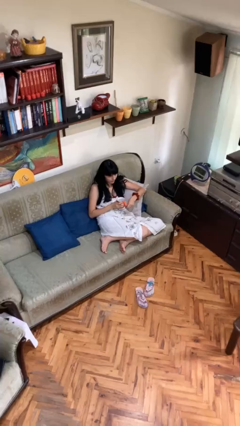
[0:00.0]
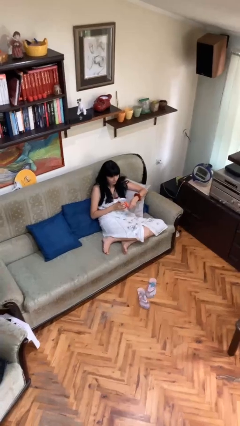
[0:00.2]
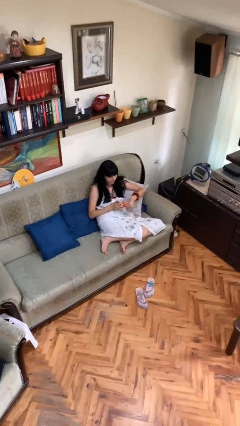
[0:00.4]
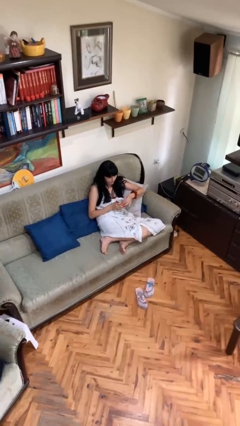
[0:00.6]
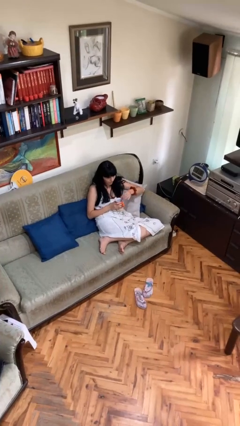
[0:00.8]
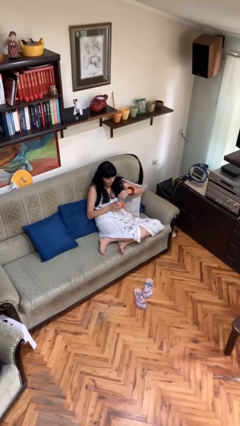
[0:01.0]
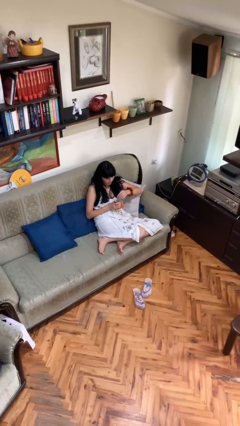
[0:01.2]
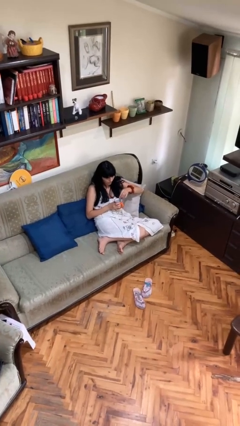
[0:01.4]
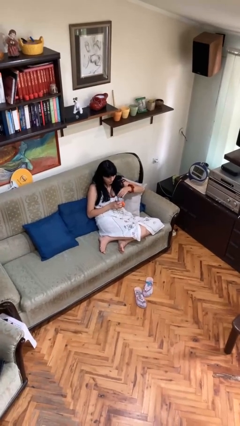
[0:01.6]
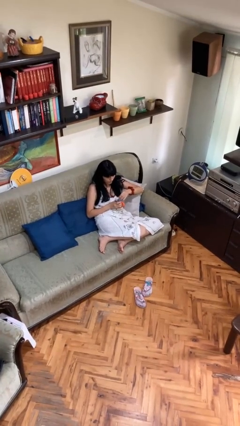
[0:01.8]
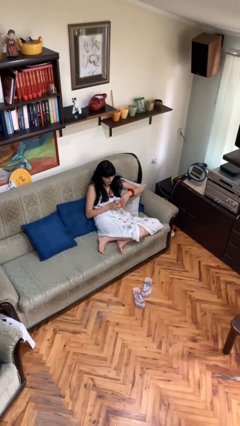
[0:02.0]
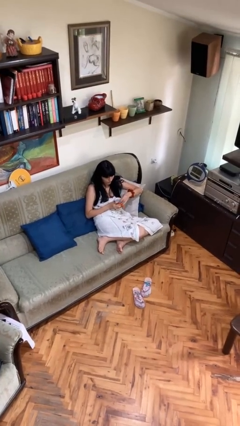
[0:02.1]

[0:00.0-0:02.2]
person stirs mug

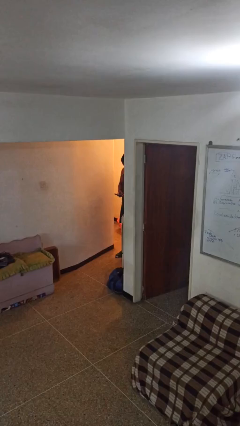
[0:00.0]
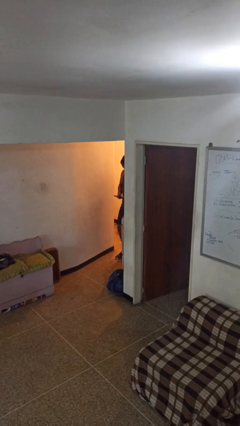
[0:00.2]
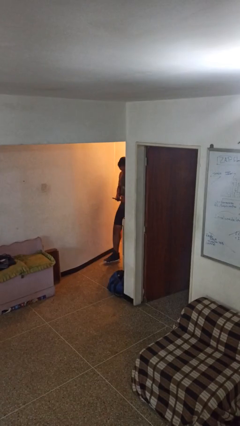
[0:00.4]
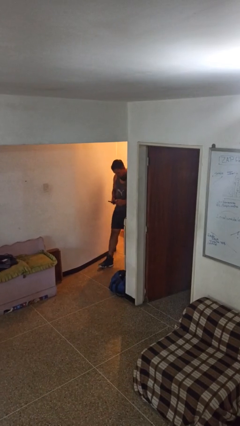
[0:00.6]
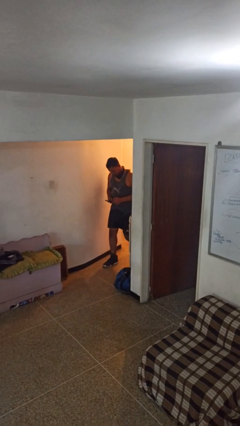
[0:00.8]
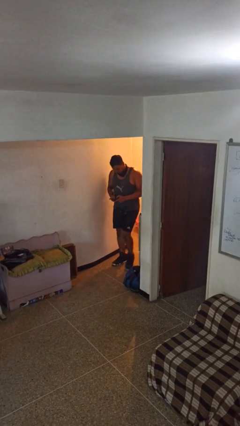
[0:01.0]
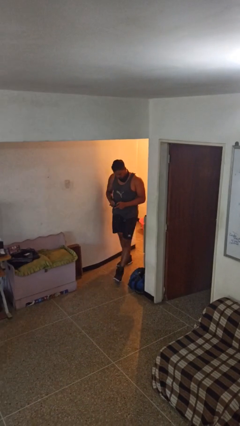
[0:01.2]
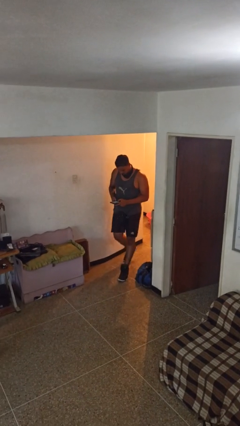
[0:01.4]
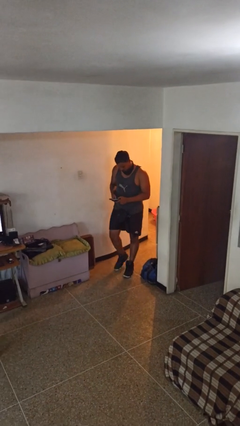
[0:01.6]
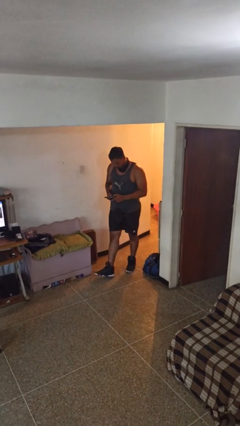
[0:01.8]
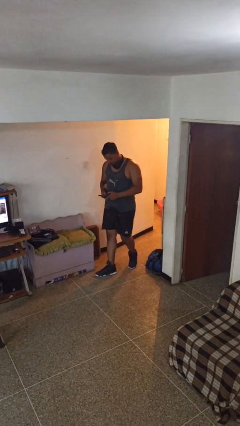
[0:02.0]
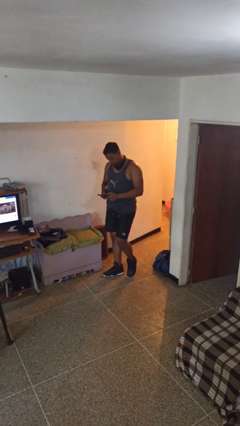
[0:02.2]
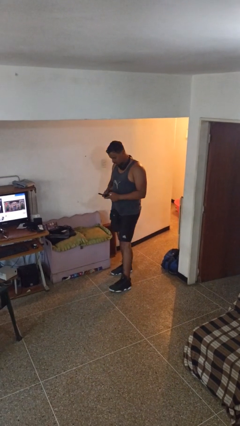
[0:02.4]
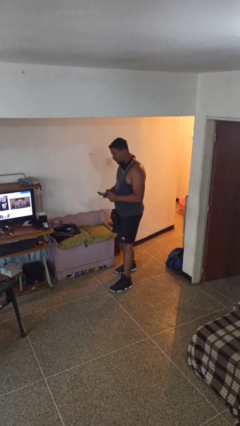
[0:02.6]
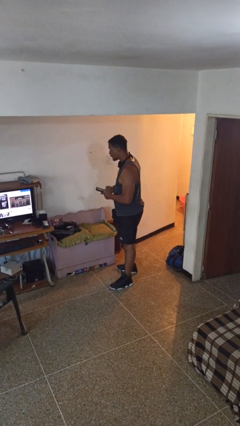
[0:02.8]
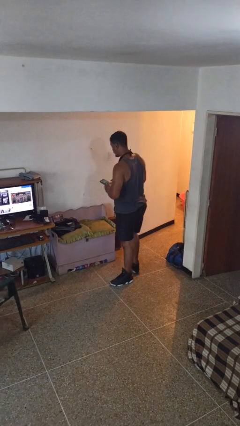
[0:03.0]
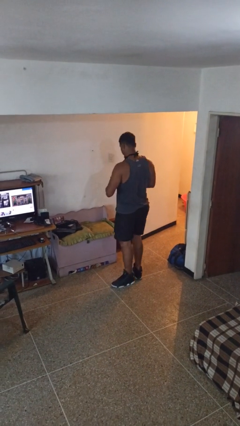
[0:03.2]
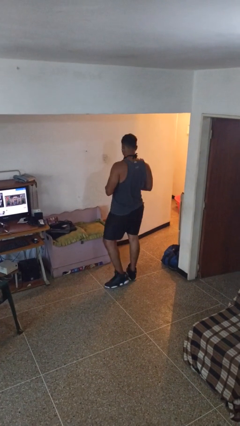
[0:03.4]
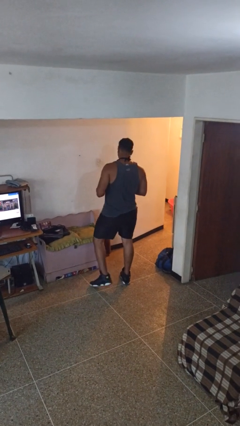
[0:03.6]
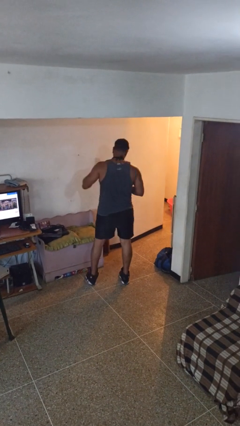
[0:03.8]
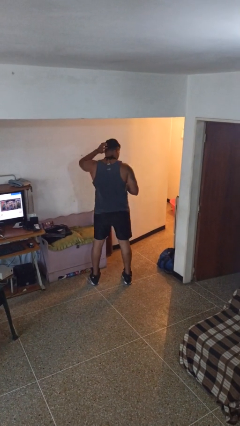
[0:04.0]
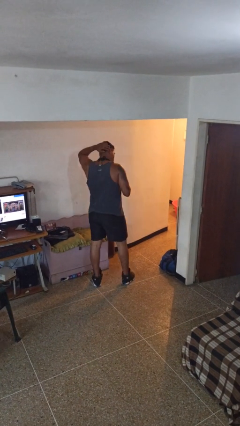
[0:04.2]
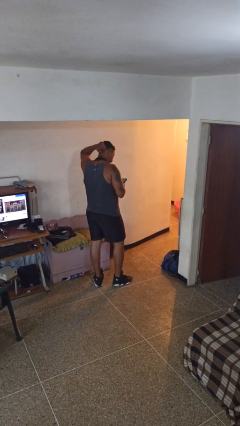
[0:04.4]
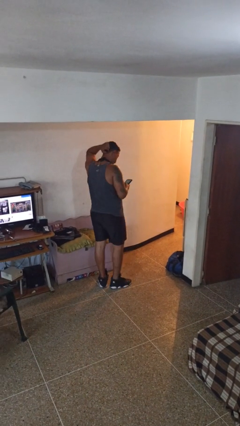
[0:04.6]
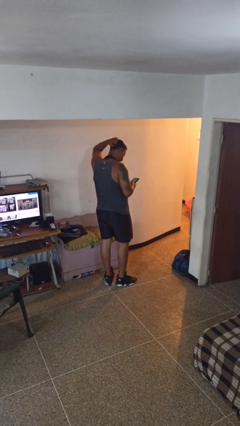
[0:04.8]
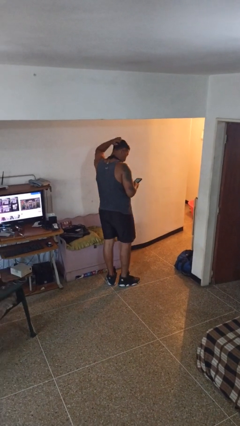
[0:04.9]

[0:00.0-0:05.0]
person enters scene through structure

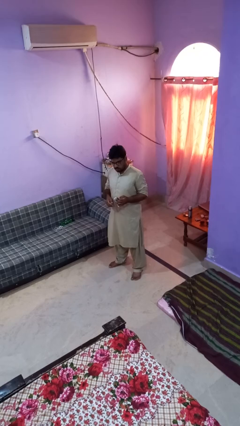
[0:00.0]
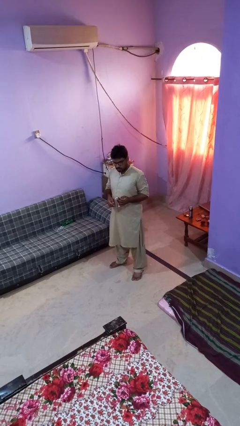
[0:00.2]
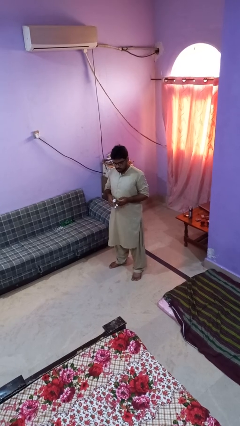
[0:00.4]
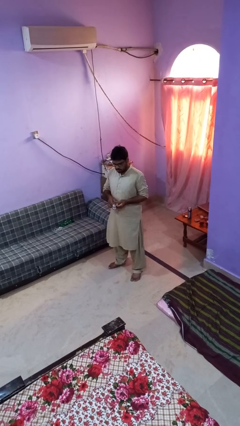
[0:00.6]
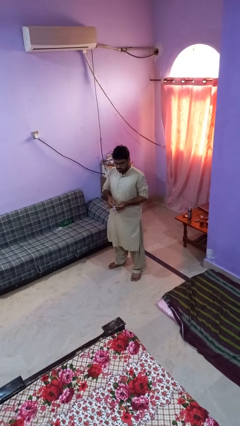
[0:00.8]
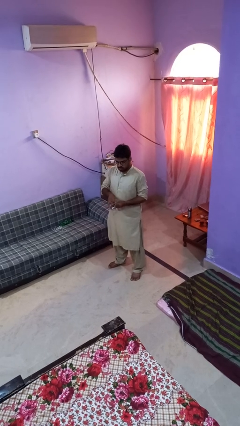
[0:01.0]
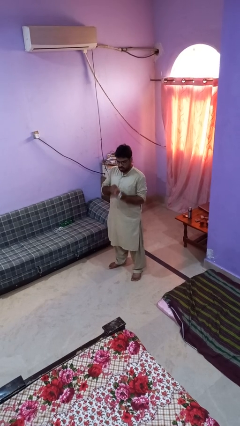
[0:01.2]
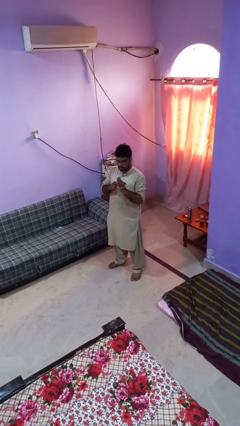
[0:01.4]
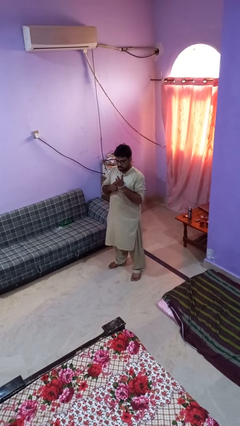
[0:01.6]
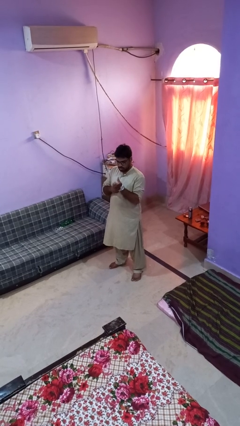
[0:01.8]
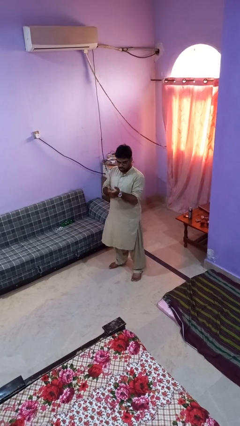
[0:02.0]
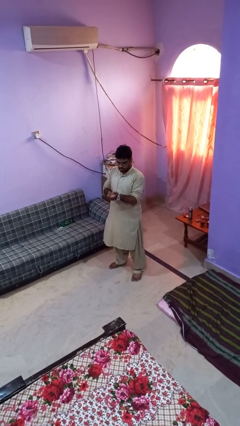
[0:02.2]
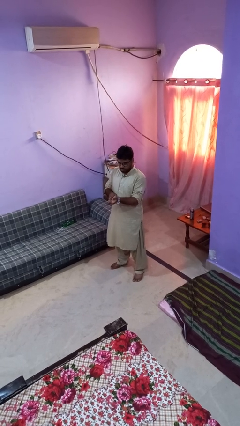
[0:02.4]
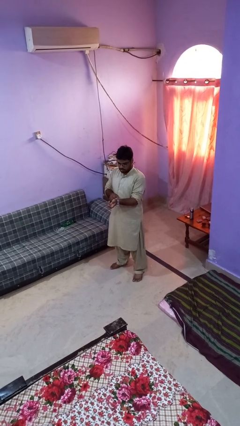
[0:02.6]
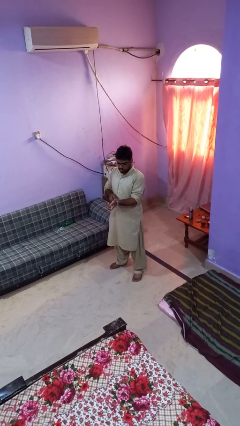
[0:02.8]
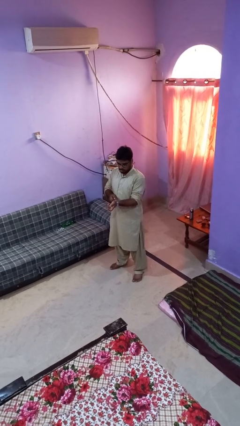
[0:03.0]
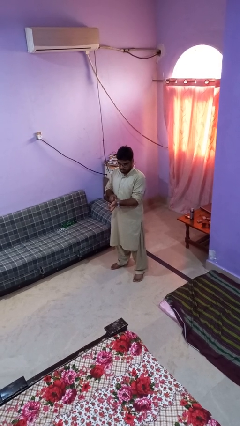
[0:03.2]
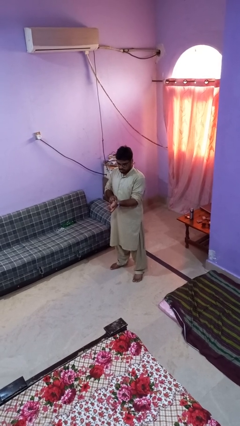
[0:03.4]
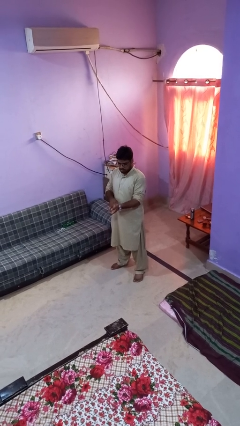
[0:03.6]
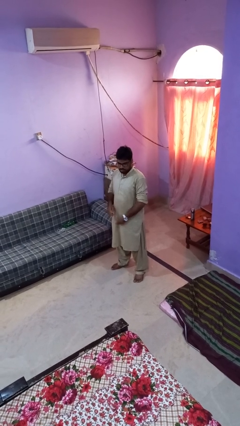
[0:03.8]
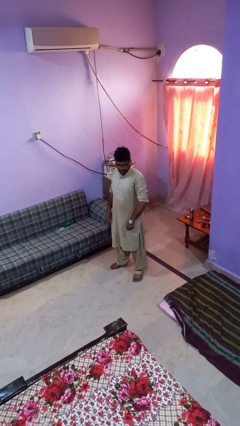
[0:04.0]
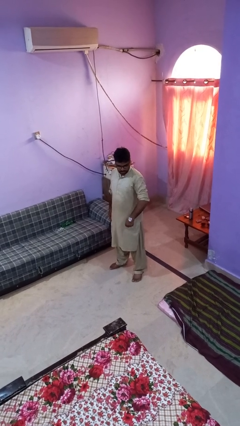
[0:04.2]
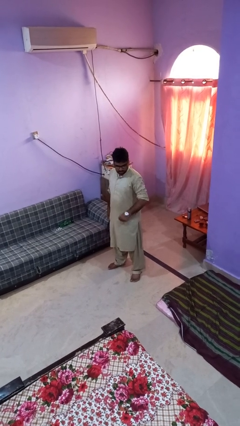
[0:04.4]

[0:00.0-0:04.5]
person puts on wristwatch

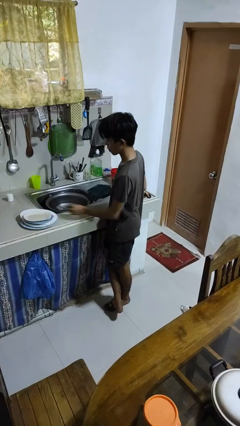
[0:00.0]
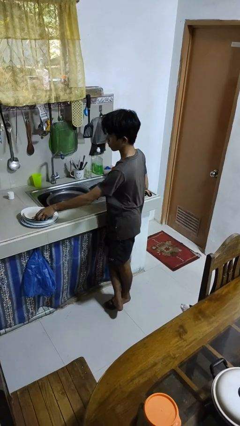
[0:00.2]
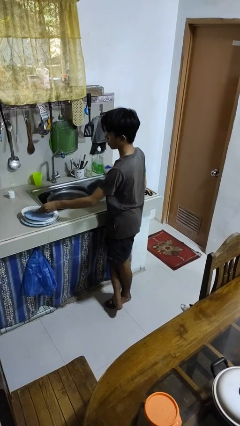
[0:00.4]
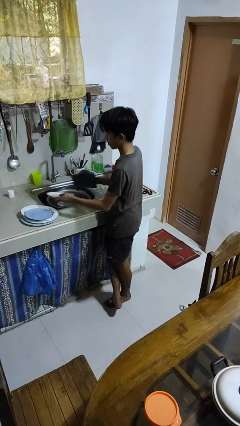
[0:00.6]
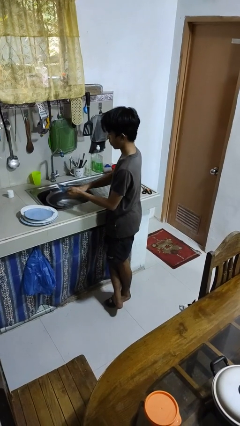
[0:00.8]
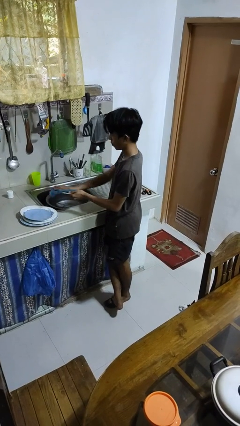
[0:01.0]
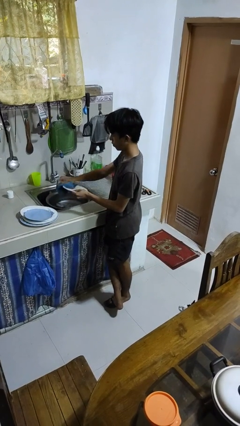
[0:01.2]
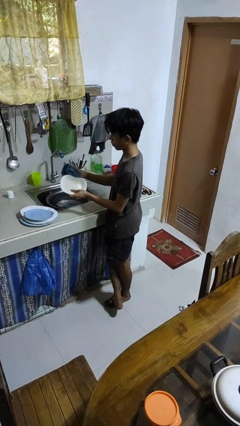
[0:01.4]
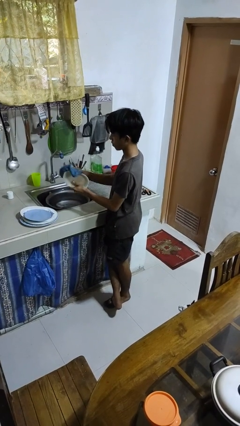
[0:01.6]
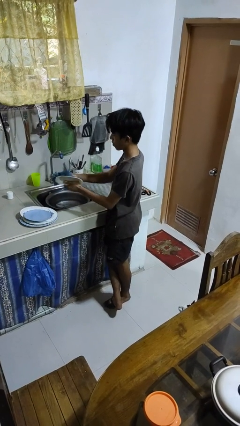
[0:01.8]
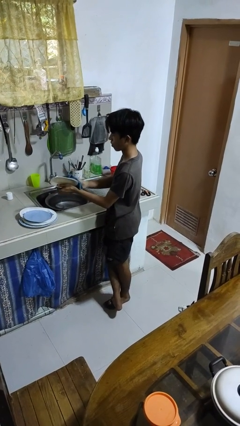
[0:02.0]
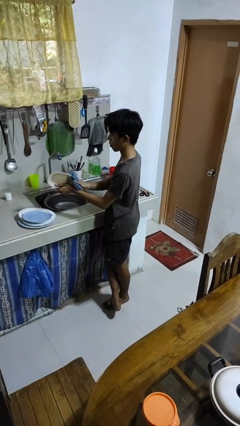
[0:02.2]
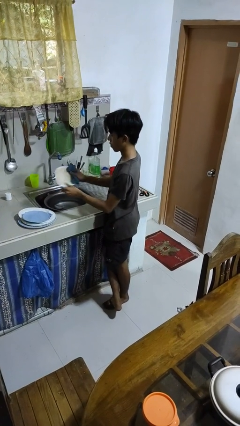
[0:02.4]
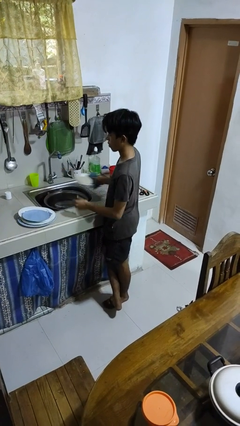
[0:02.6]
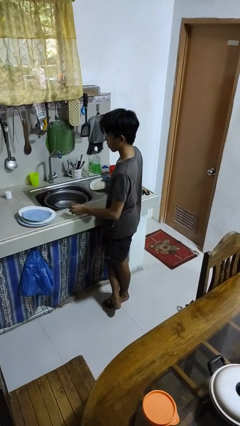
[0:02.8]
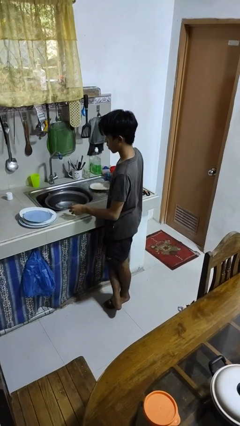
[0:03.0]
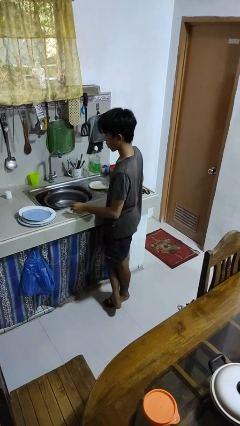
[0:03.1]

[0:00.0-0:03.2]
person dries dish

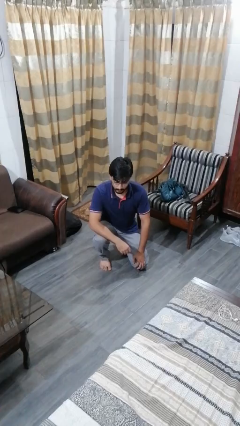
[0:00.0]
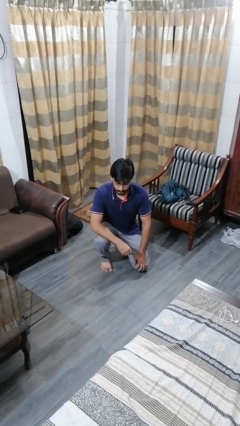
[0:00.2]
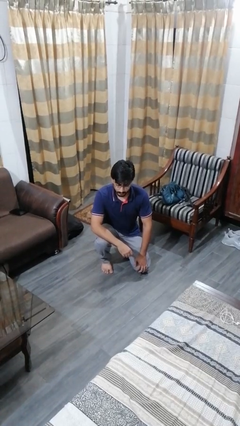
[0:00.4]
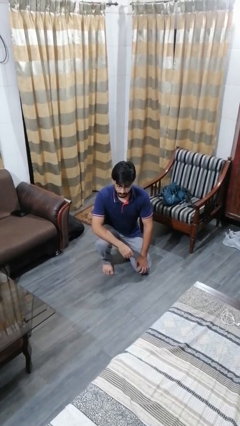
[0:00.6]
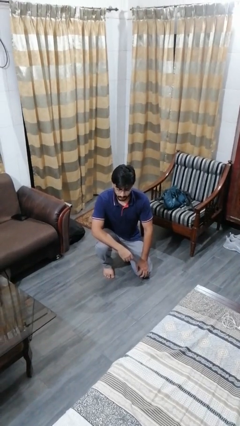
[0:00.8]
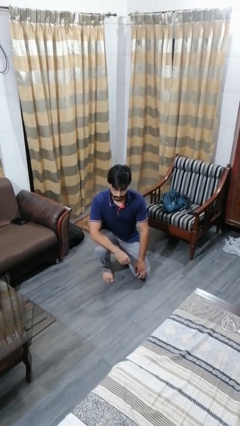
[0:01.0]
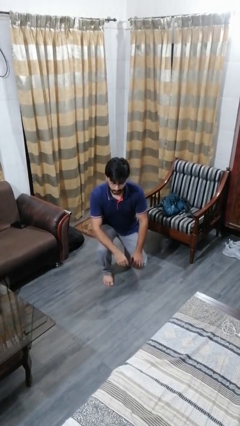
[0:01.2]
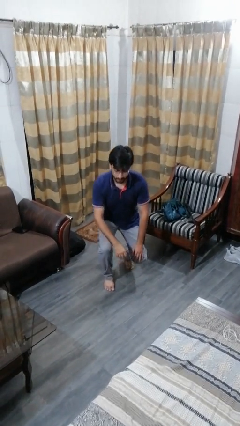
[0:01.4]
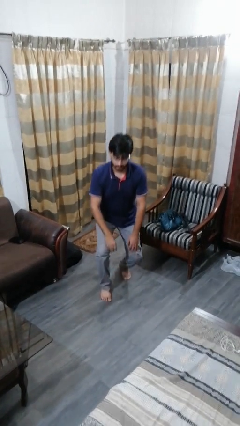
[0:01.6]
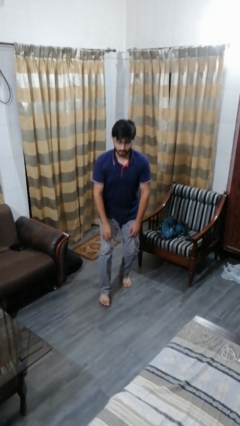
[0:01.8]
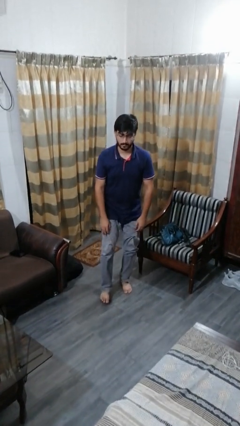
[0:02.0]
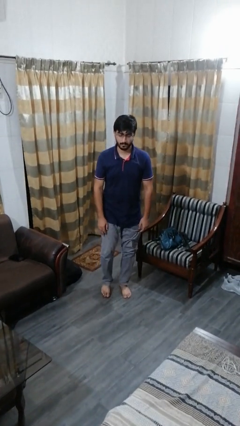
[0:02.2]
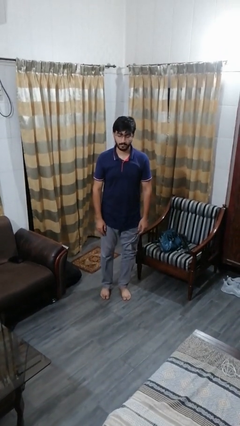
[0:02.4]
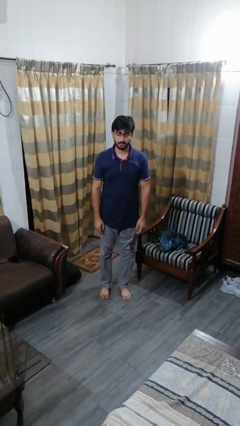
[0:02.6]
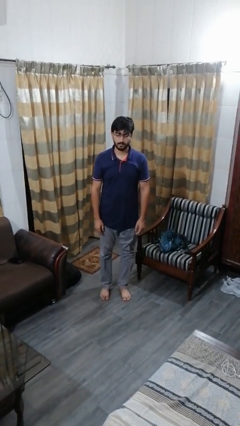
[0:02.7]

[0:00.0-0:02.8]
person stands up from floor
